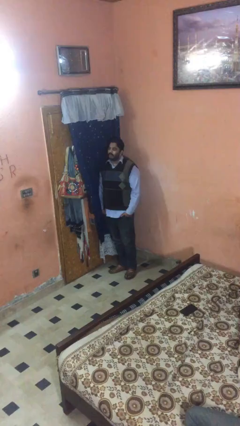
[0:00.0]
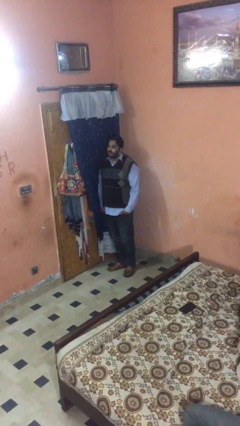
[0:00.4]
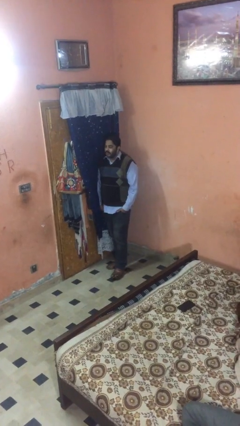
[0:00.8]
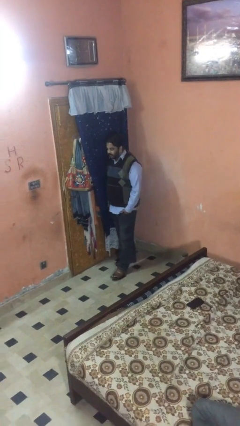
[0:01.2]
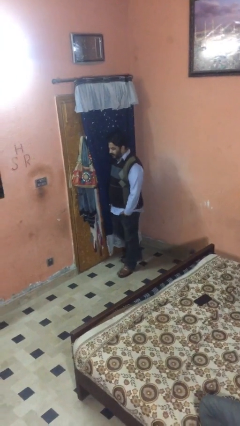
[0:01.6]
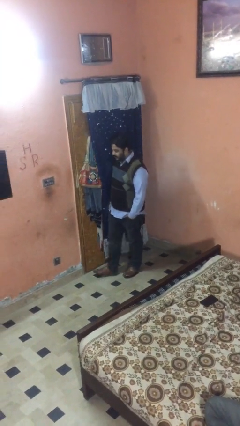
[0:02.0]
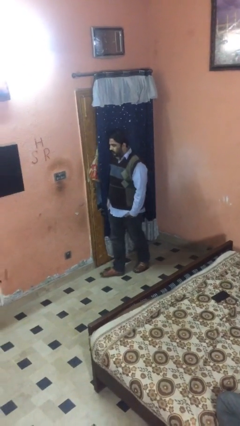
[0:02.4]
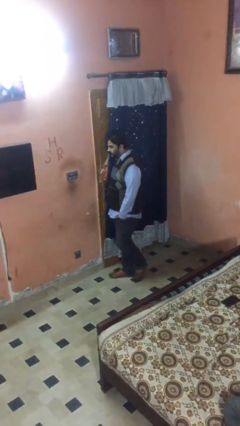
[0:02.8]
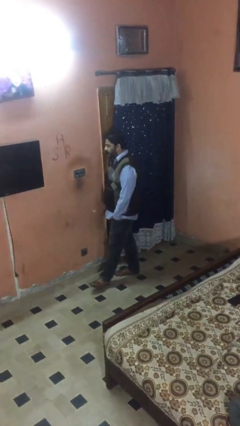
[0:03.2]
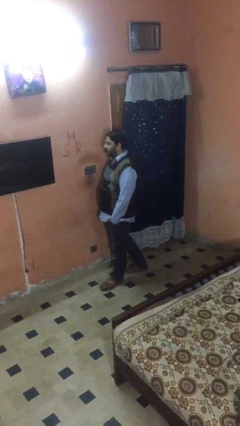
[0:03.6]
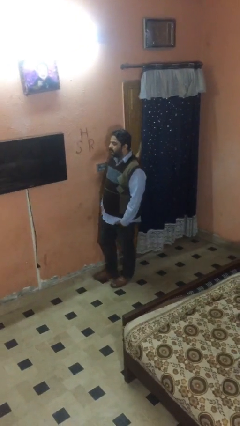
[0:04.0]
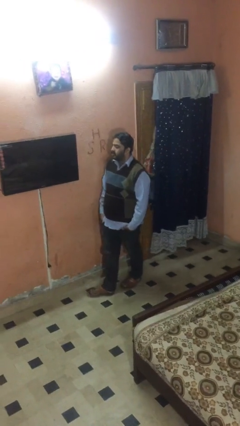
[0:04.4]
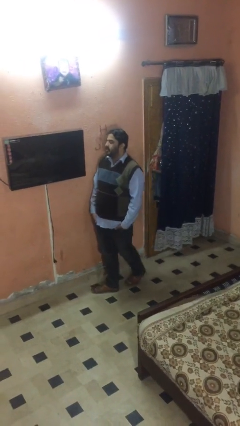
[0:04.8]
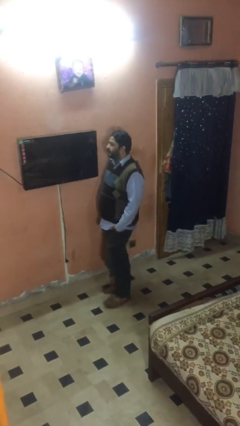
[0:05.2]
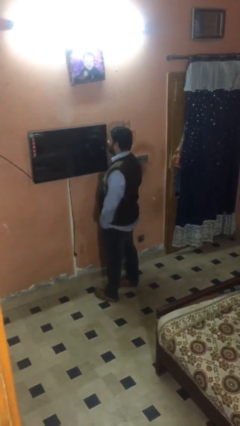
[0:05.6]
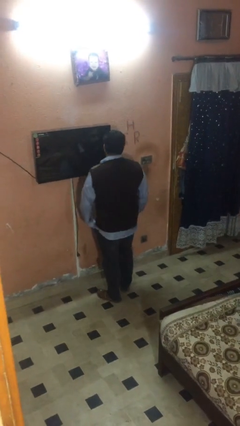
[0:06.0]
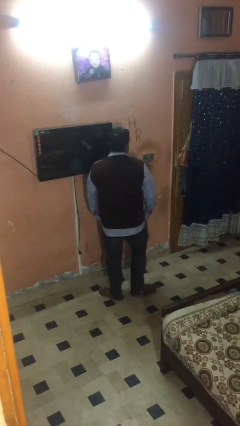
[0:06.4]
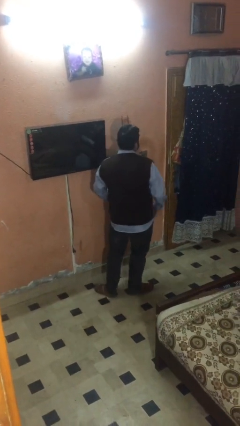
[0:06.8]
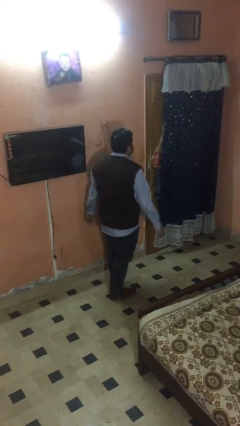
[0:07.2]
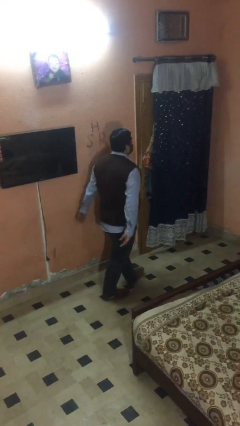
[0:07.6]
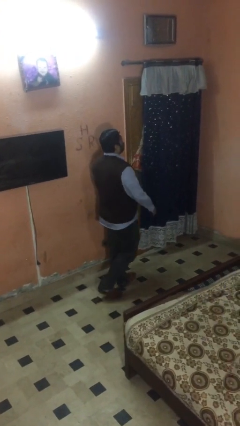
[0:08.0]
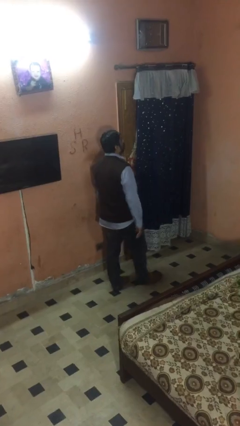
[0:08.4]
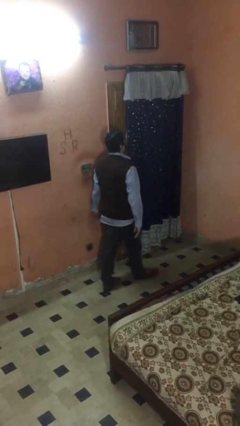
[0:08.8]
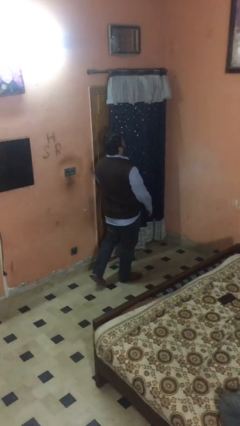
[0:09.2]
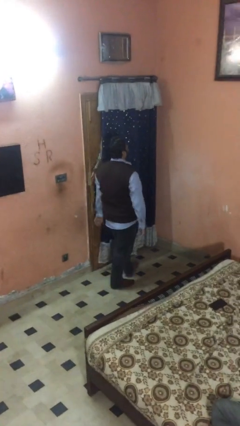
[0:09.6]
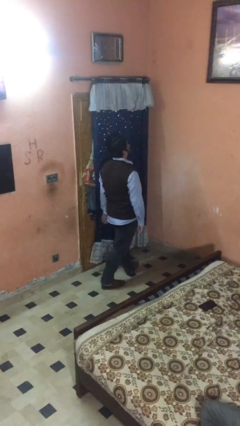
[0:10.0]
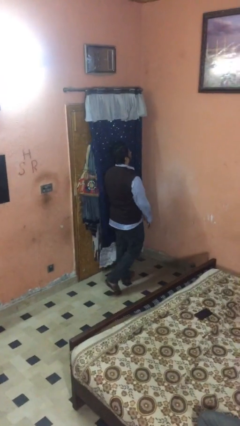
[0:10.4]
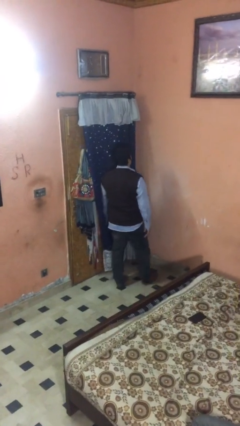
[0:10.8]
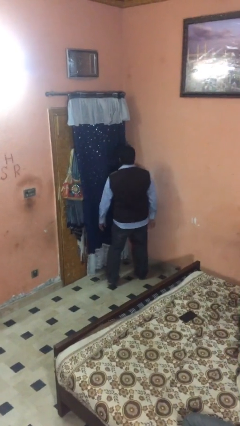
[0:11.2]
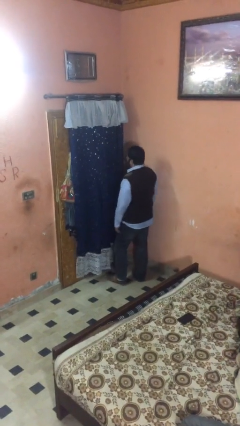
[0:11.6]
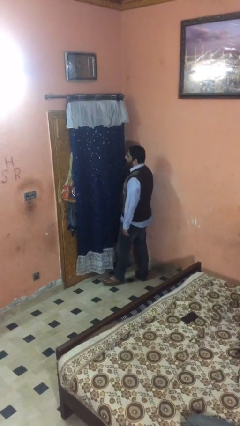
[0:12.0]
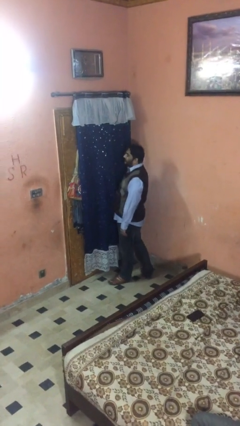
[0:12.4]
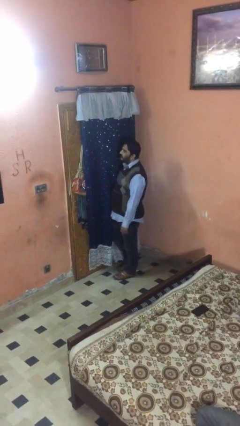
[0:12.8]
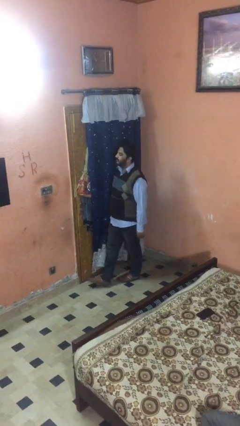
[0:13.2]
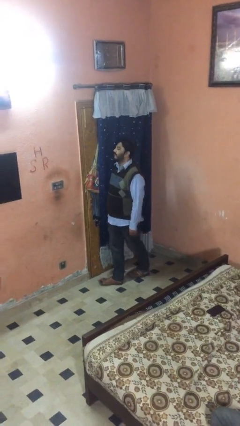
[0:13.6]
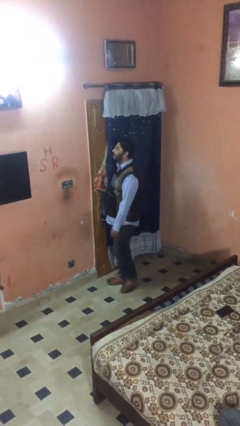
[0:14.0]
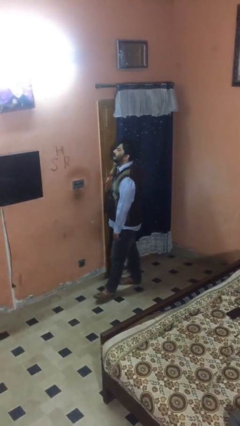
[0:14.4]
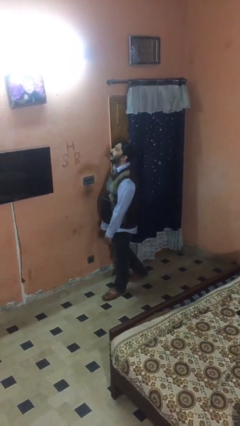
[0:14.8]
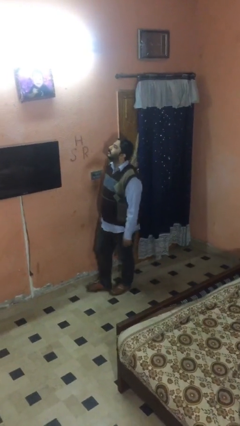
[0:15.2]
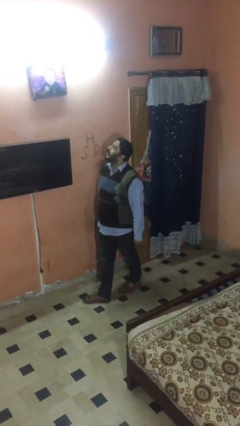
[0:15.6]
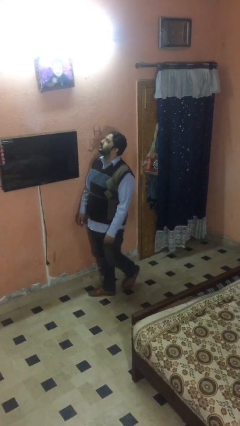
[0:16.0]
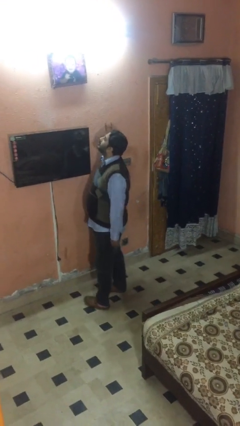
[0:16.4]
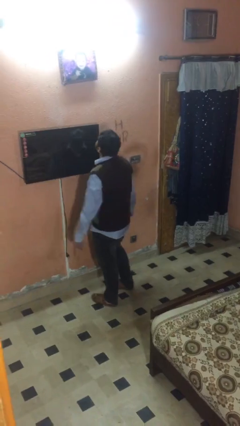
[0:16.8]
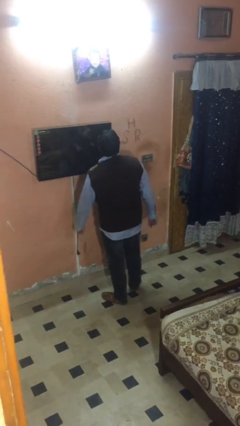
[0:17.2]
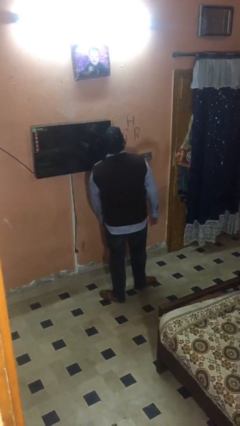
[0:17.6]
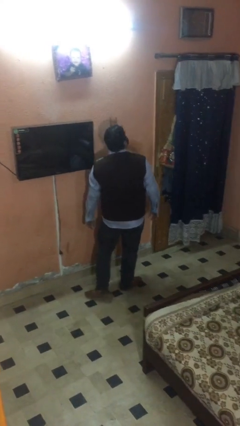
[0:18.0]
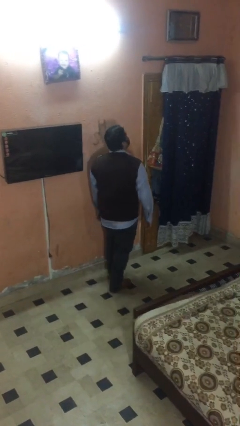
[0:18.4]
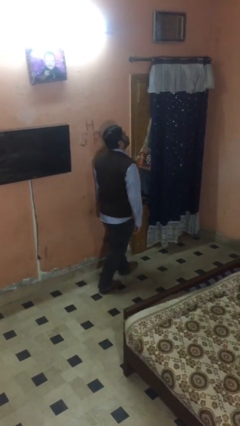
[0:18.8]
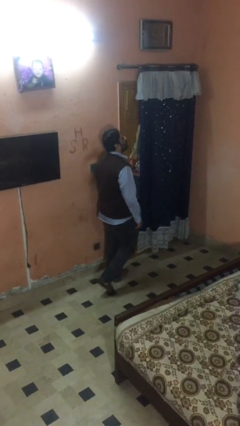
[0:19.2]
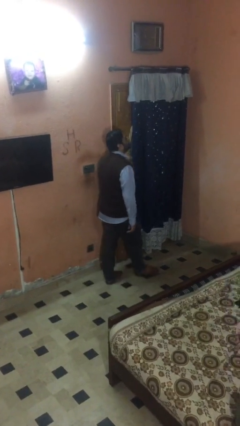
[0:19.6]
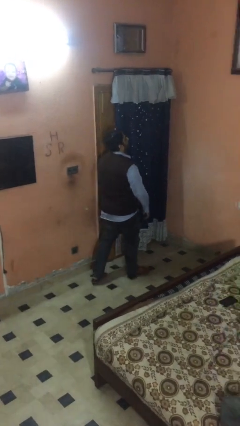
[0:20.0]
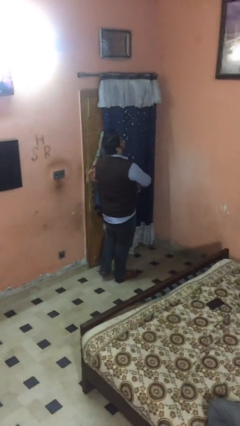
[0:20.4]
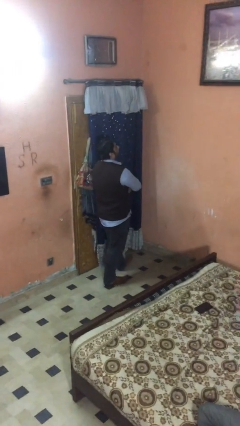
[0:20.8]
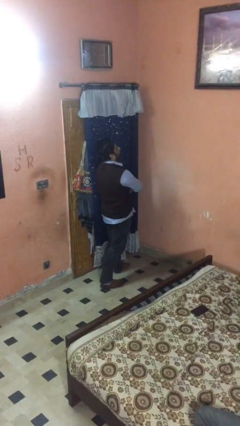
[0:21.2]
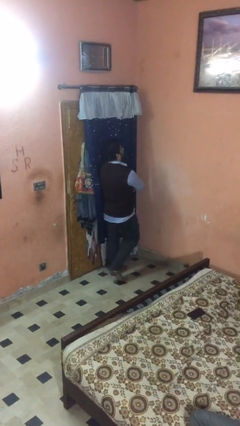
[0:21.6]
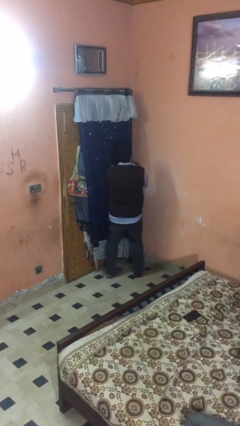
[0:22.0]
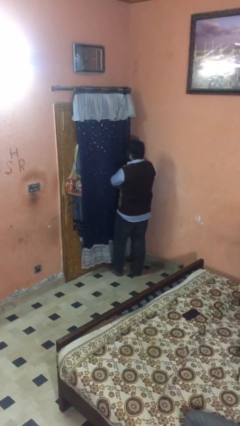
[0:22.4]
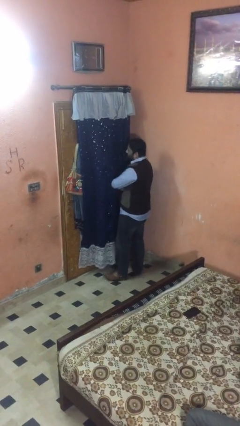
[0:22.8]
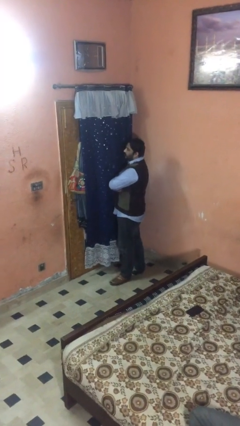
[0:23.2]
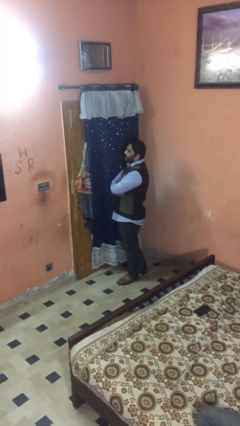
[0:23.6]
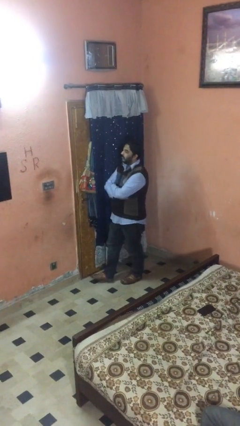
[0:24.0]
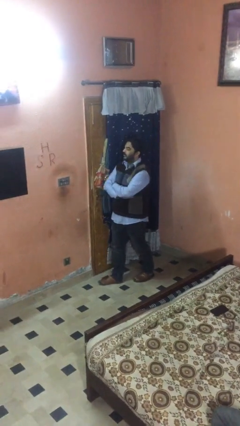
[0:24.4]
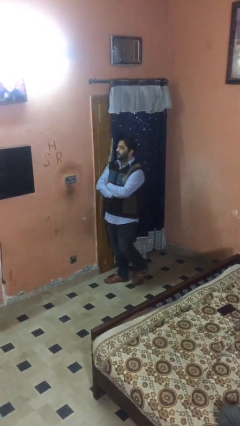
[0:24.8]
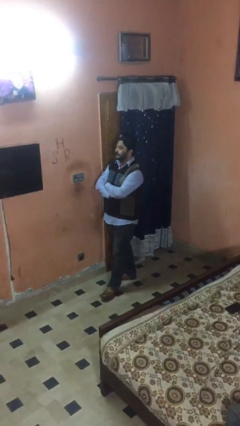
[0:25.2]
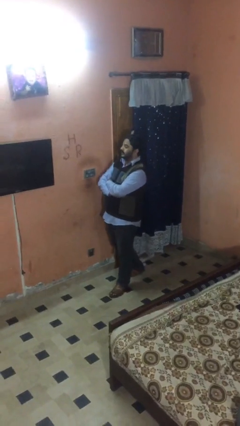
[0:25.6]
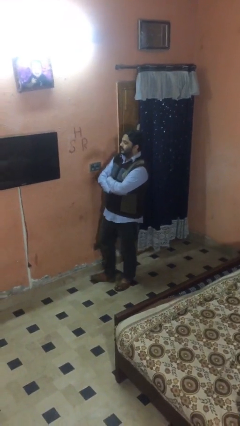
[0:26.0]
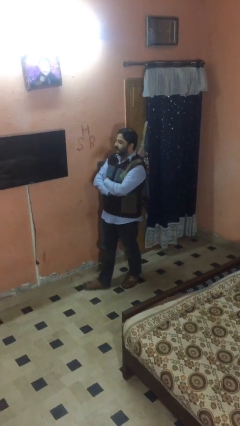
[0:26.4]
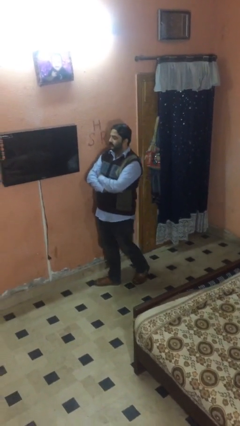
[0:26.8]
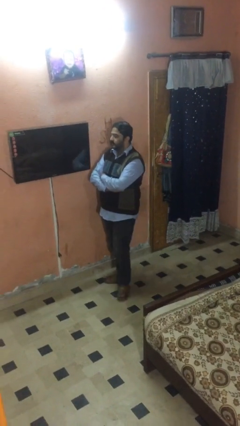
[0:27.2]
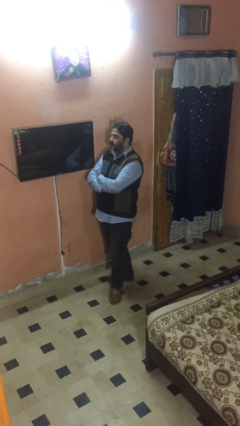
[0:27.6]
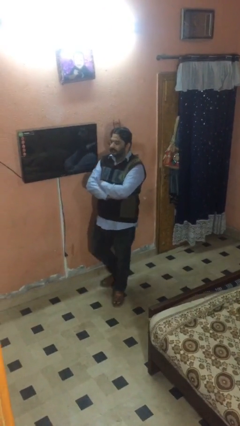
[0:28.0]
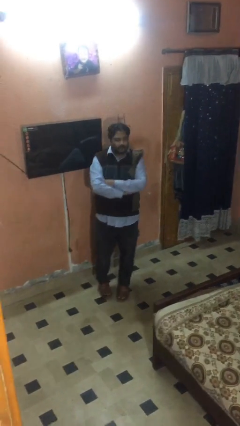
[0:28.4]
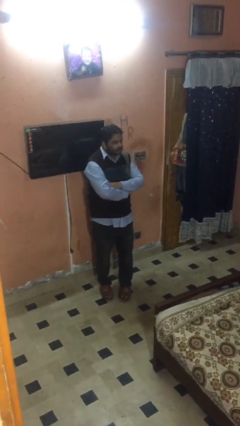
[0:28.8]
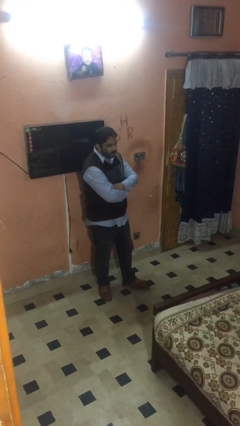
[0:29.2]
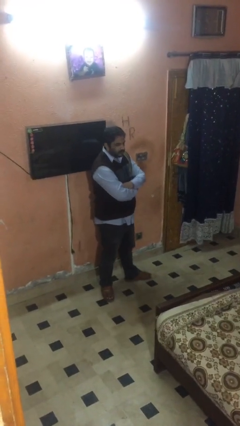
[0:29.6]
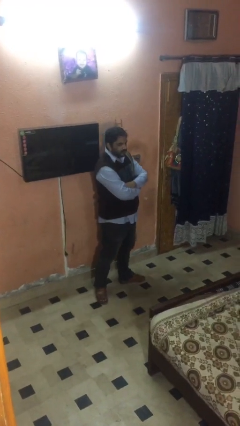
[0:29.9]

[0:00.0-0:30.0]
person walks

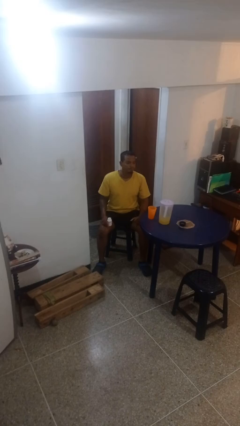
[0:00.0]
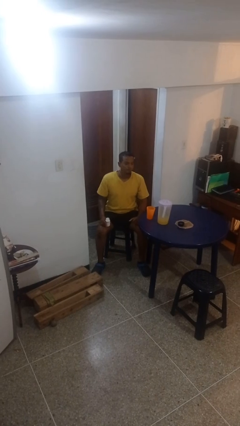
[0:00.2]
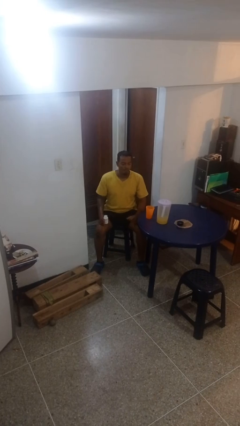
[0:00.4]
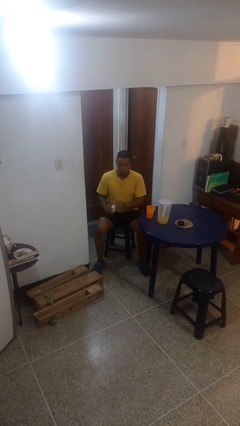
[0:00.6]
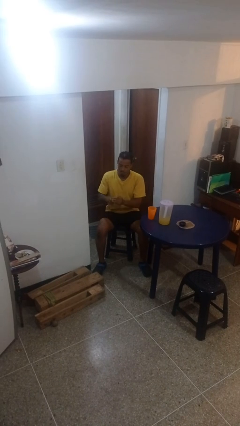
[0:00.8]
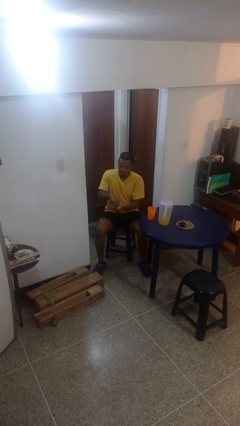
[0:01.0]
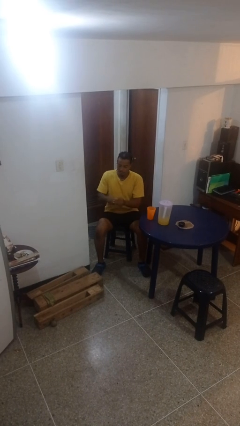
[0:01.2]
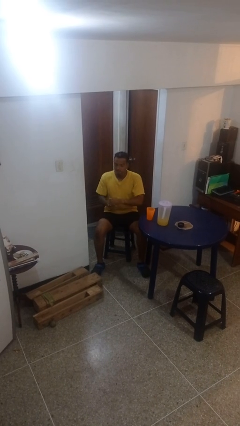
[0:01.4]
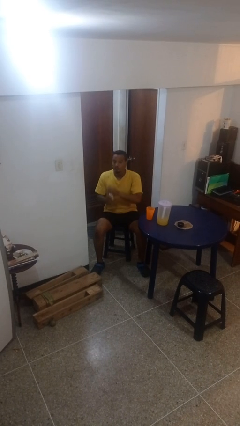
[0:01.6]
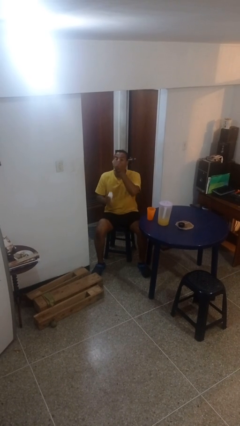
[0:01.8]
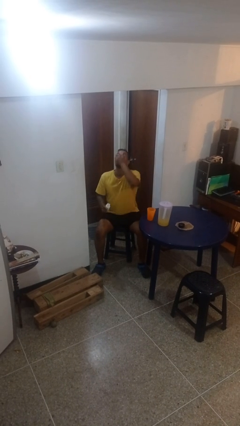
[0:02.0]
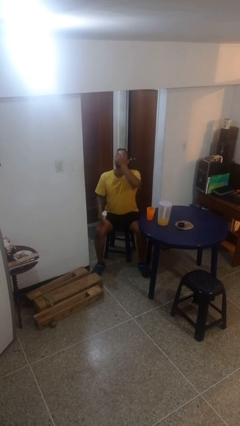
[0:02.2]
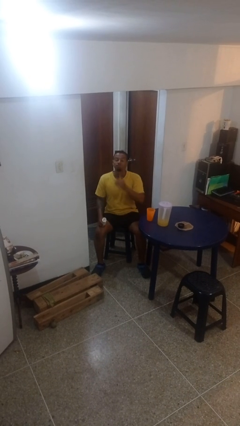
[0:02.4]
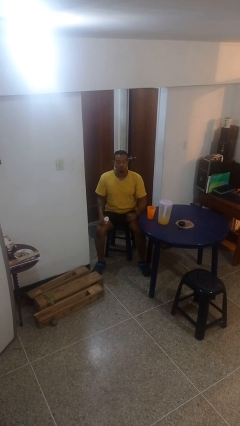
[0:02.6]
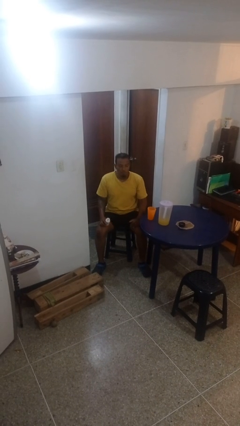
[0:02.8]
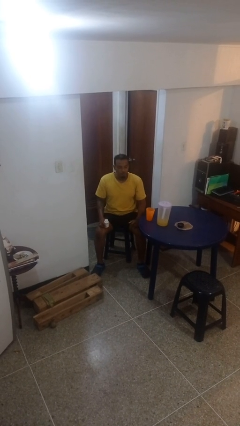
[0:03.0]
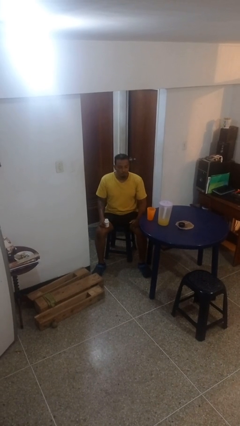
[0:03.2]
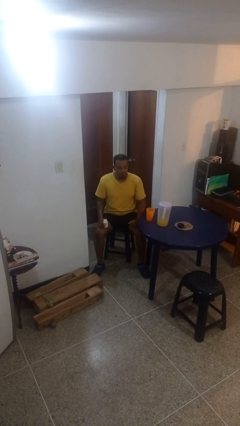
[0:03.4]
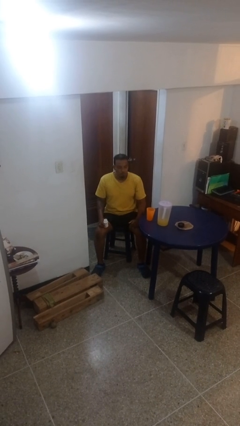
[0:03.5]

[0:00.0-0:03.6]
person takes medicine pills
